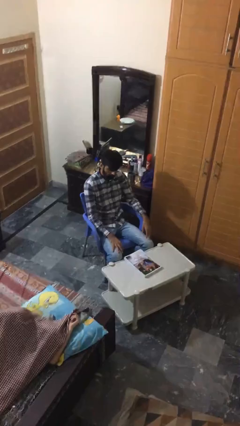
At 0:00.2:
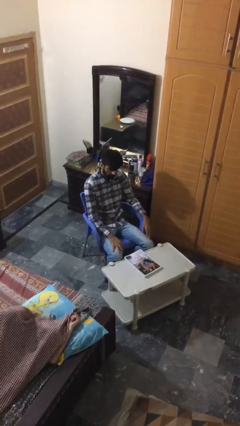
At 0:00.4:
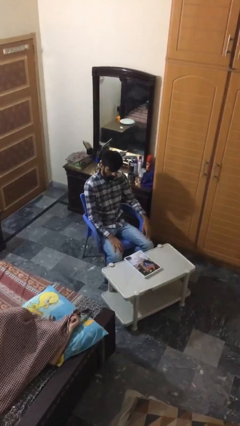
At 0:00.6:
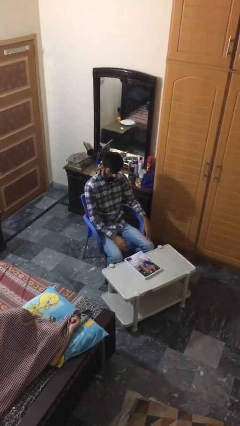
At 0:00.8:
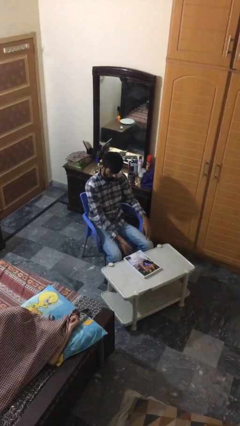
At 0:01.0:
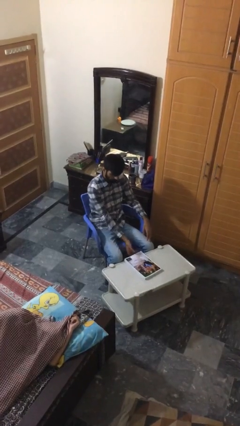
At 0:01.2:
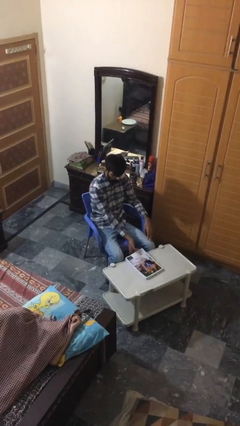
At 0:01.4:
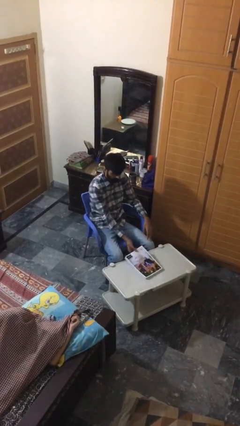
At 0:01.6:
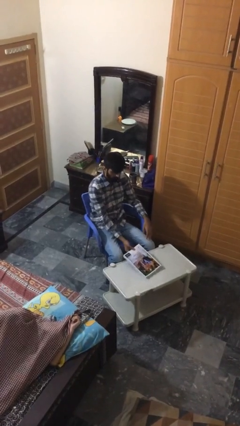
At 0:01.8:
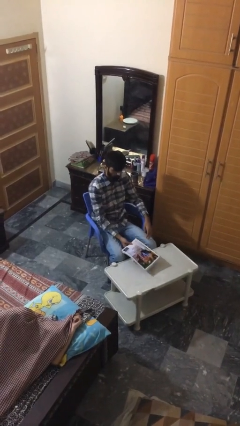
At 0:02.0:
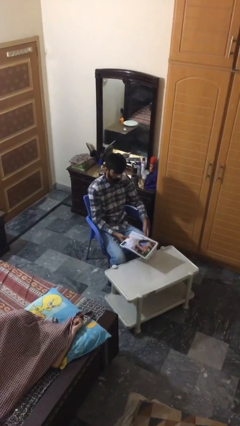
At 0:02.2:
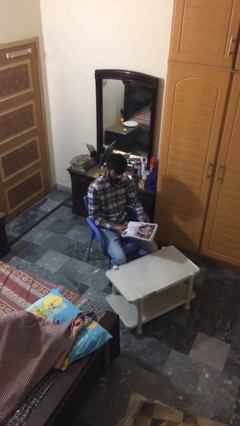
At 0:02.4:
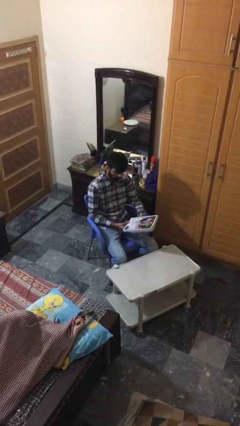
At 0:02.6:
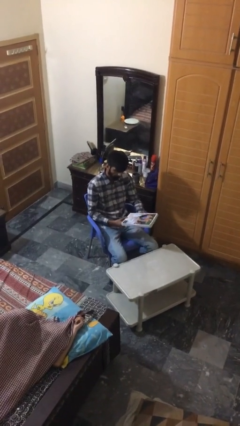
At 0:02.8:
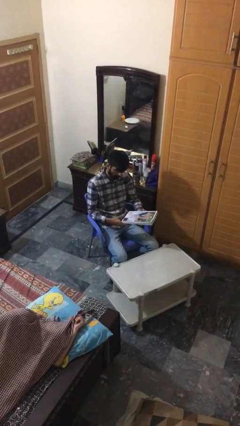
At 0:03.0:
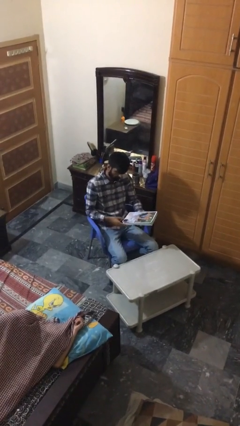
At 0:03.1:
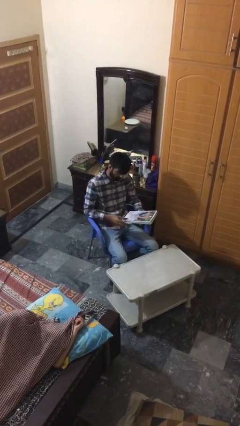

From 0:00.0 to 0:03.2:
person picks up object from table

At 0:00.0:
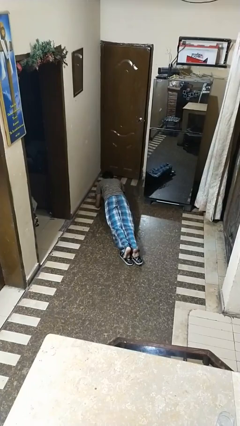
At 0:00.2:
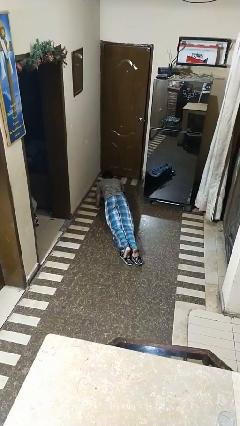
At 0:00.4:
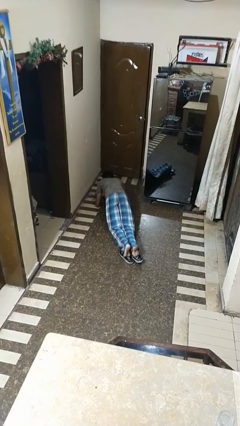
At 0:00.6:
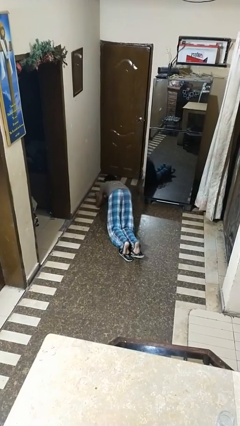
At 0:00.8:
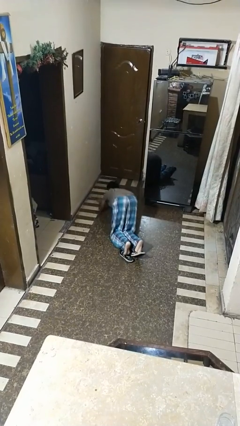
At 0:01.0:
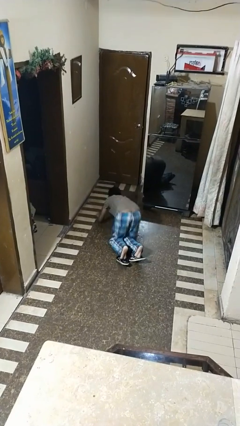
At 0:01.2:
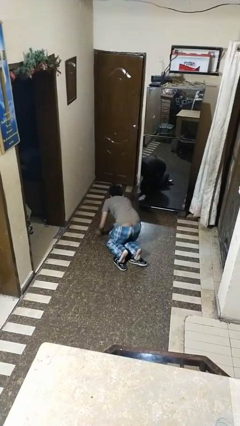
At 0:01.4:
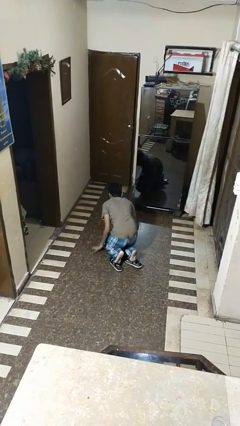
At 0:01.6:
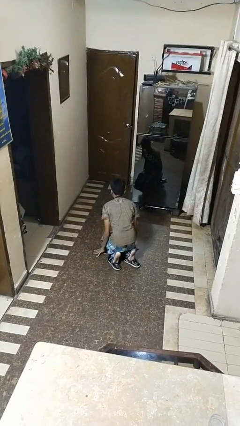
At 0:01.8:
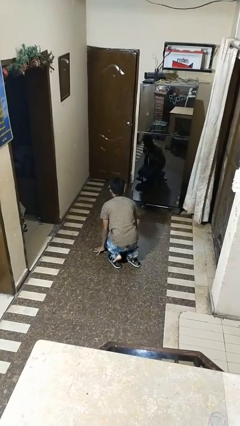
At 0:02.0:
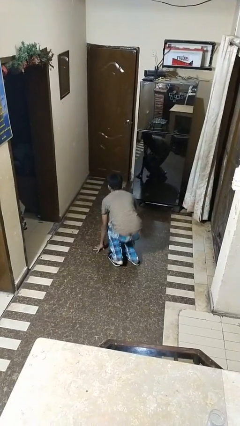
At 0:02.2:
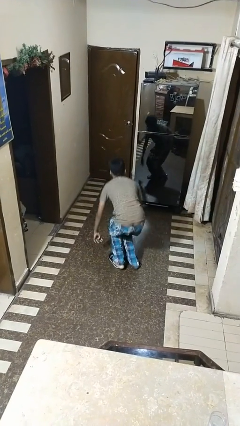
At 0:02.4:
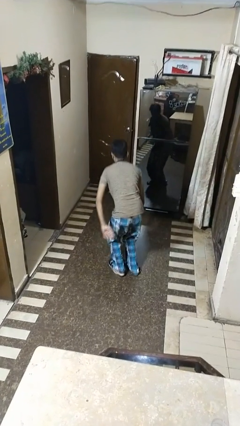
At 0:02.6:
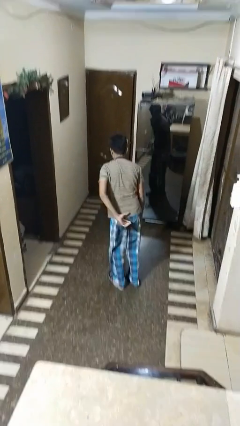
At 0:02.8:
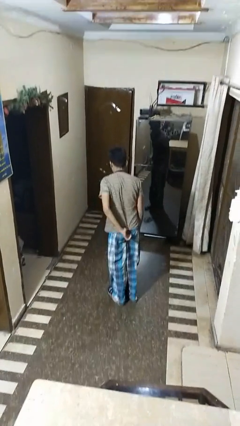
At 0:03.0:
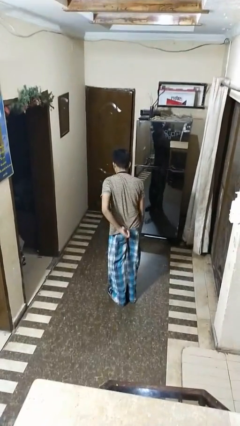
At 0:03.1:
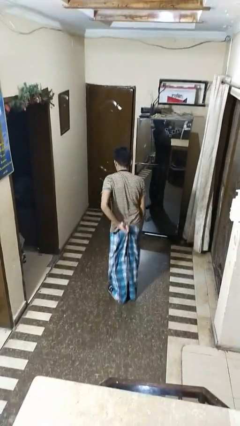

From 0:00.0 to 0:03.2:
person stands up from floor

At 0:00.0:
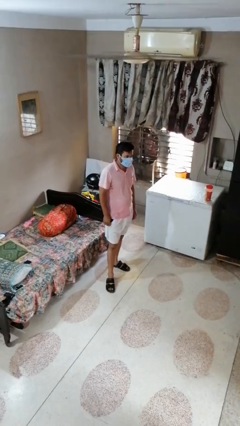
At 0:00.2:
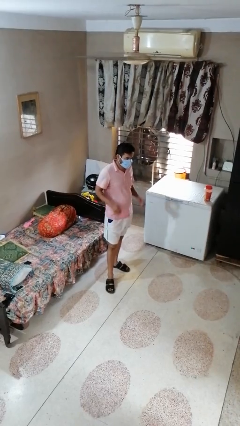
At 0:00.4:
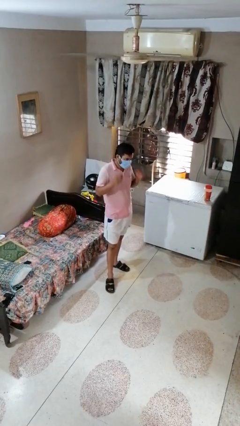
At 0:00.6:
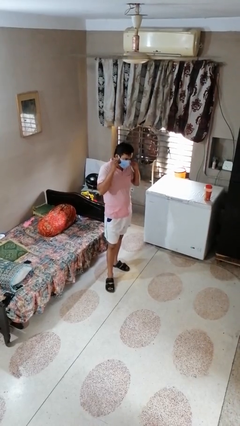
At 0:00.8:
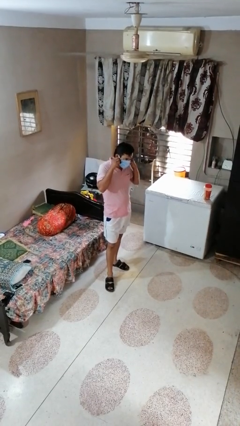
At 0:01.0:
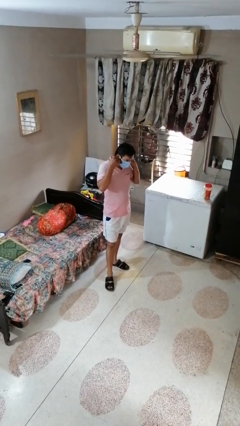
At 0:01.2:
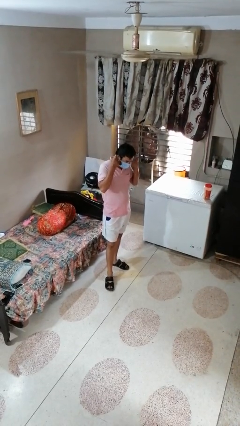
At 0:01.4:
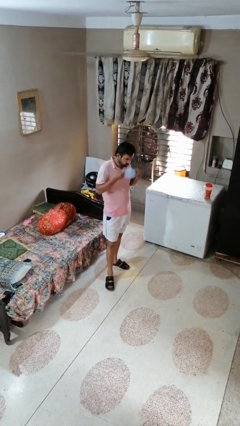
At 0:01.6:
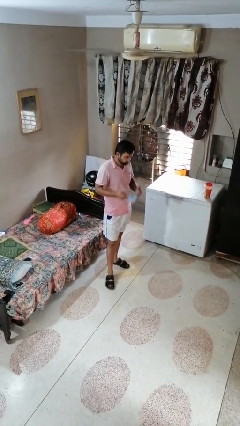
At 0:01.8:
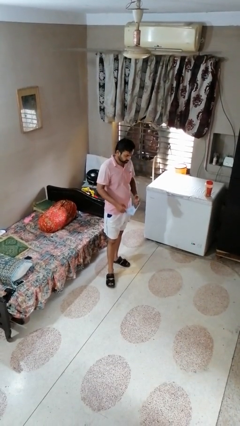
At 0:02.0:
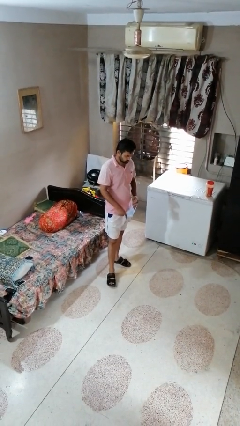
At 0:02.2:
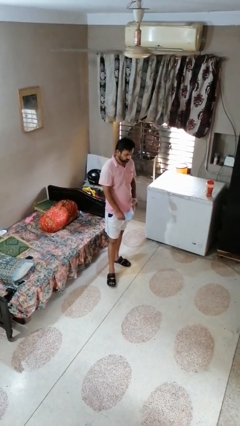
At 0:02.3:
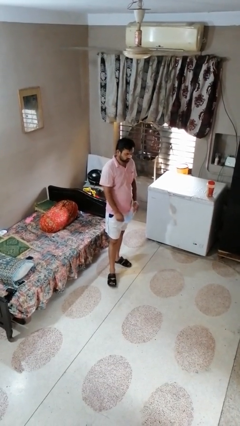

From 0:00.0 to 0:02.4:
person takes off facemask

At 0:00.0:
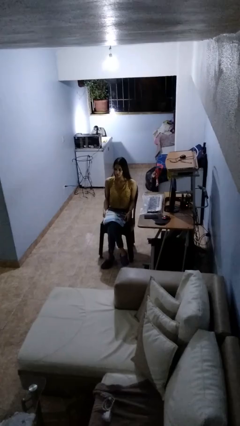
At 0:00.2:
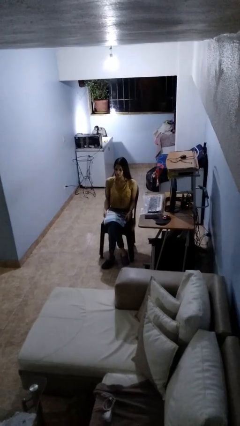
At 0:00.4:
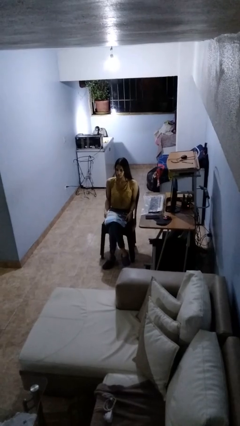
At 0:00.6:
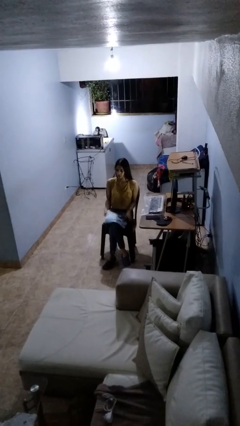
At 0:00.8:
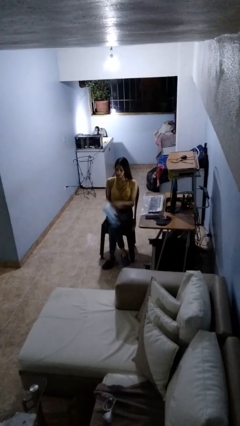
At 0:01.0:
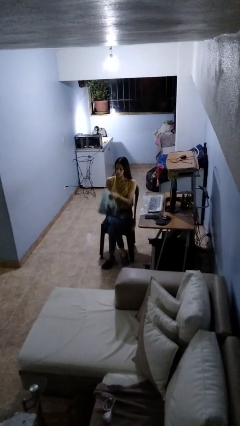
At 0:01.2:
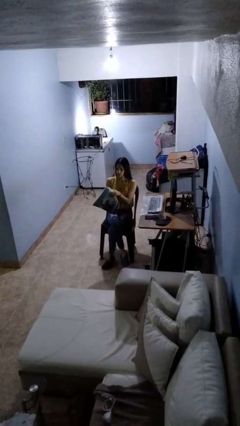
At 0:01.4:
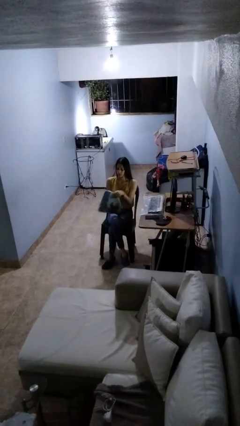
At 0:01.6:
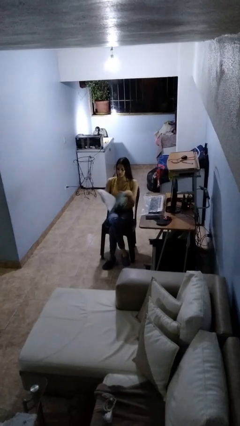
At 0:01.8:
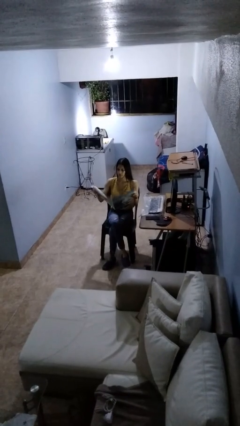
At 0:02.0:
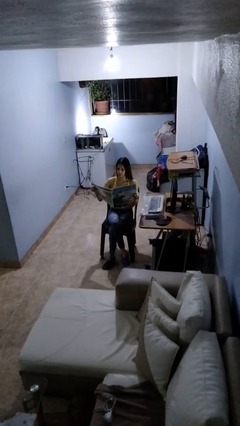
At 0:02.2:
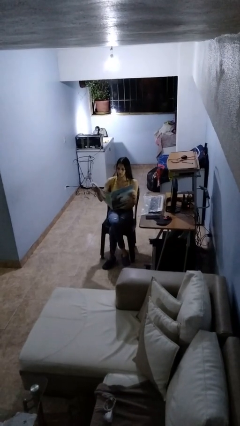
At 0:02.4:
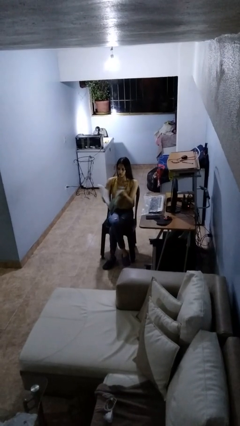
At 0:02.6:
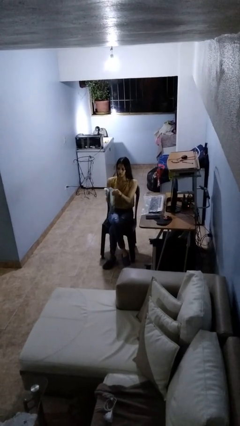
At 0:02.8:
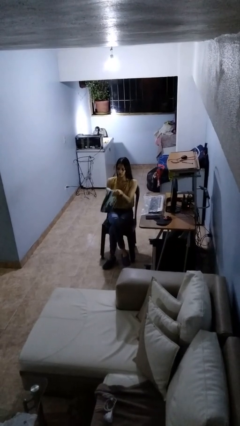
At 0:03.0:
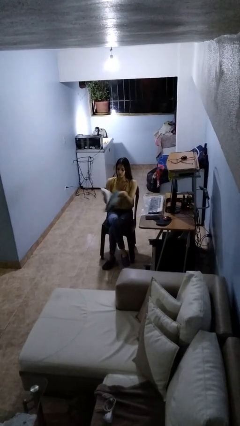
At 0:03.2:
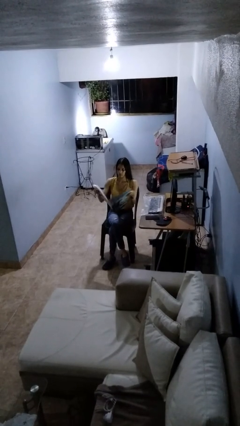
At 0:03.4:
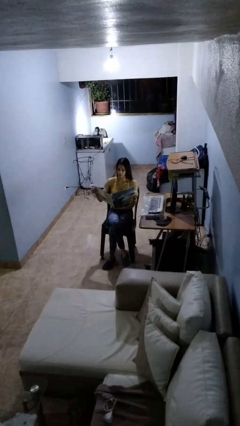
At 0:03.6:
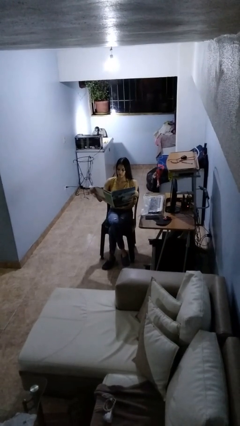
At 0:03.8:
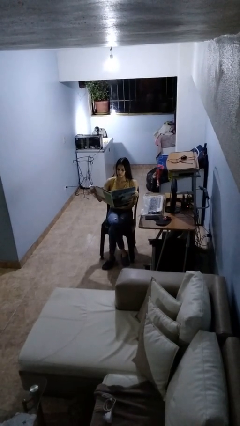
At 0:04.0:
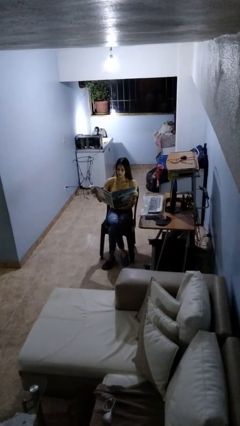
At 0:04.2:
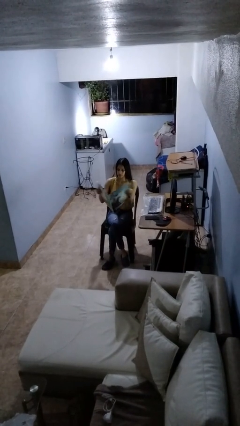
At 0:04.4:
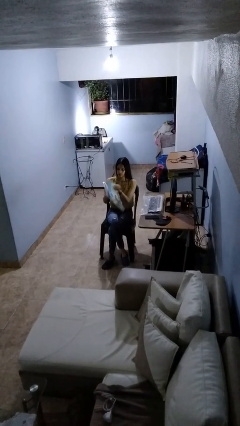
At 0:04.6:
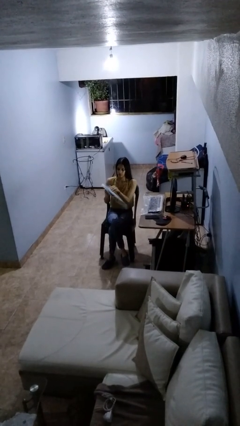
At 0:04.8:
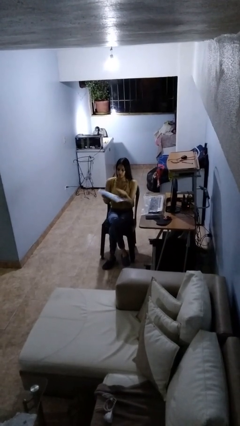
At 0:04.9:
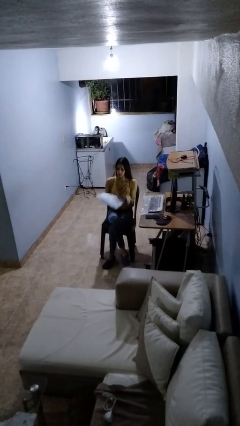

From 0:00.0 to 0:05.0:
person reads newspaper

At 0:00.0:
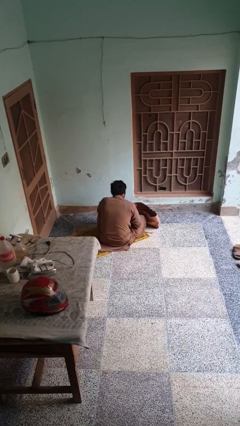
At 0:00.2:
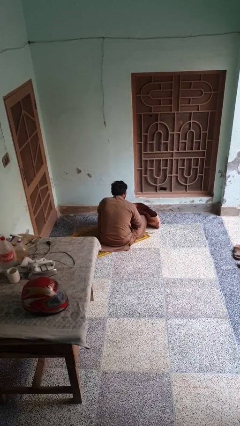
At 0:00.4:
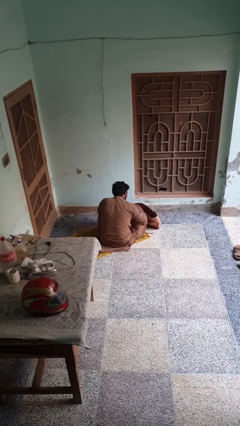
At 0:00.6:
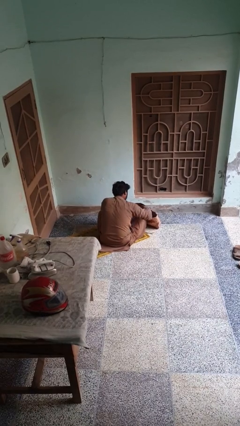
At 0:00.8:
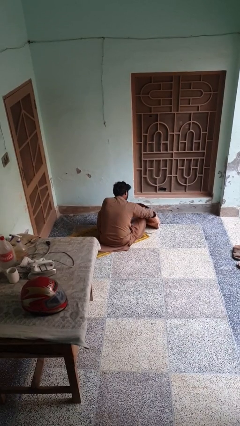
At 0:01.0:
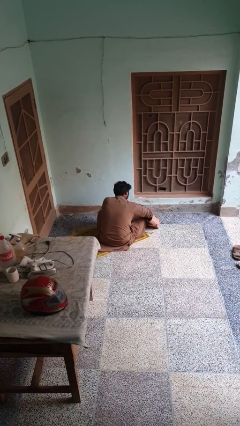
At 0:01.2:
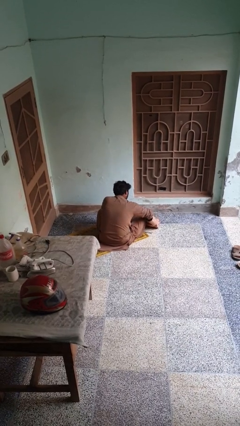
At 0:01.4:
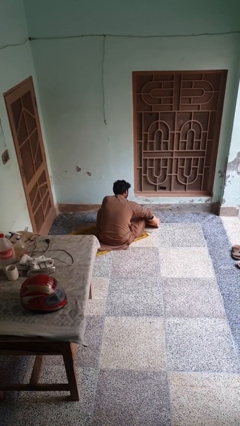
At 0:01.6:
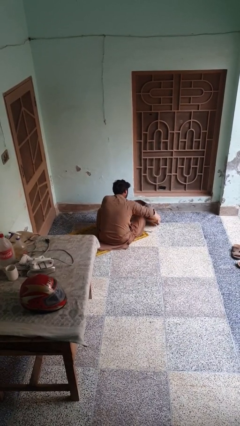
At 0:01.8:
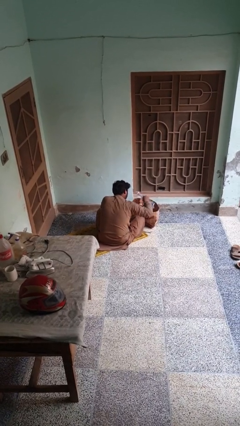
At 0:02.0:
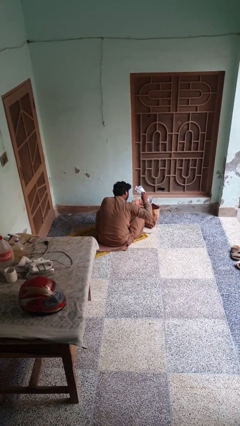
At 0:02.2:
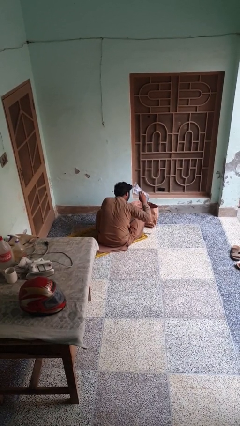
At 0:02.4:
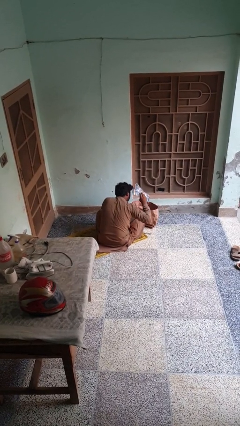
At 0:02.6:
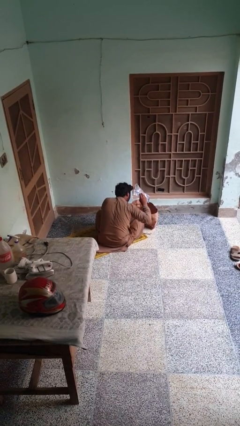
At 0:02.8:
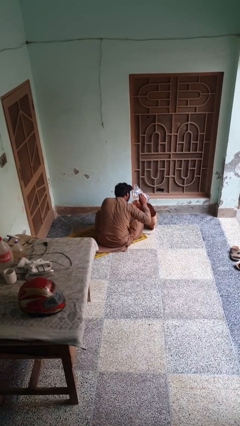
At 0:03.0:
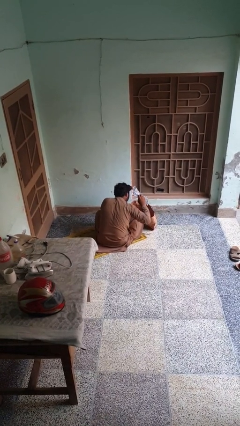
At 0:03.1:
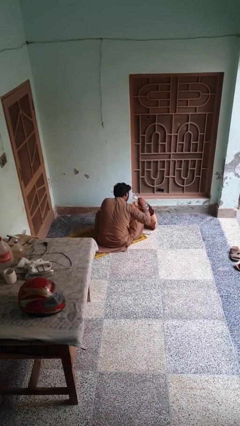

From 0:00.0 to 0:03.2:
person searches in bag

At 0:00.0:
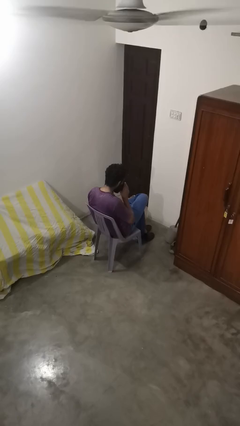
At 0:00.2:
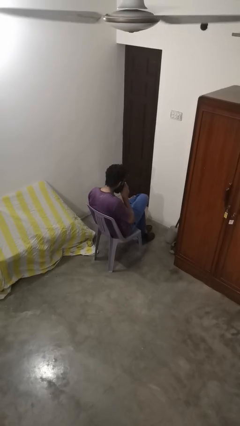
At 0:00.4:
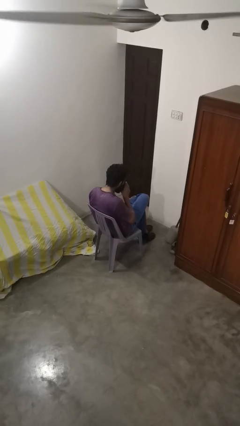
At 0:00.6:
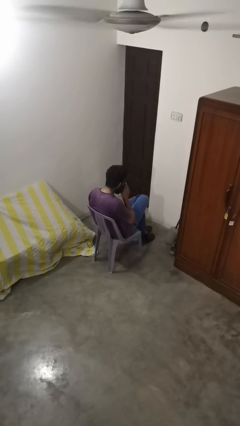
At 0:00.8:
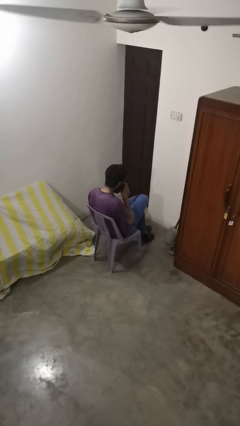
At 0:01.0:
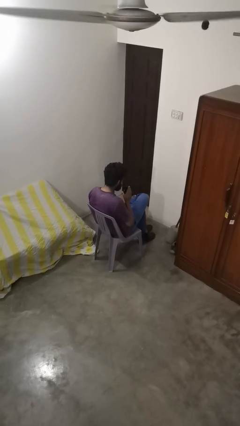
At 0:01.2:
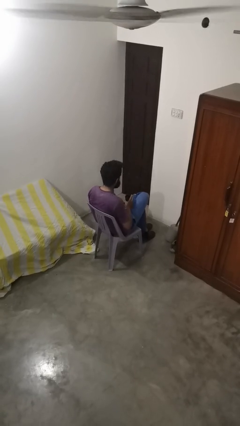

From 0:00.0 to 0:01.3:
person drinks from straw
